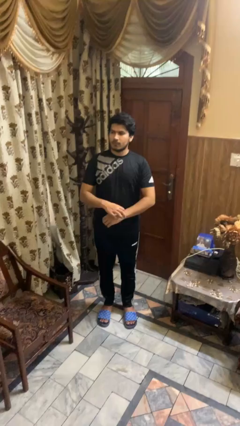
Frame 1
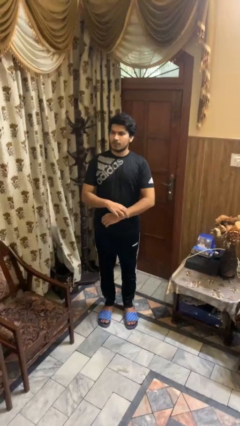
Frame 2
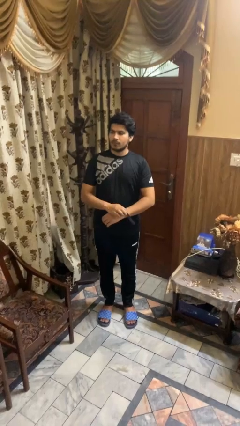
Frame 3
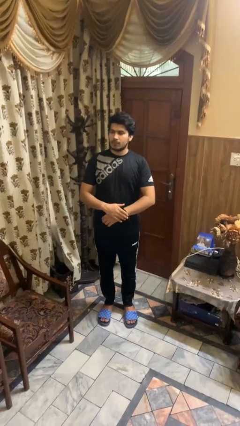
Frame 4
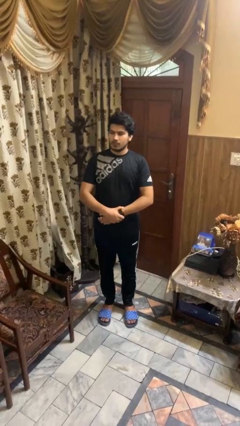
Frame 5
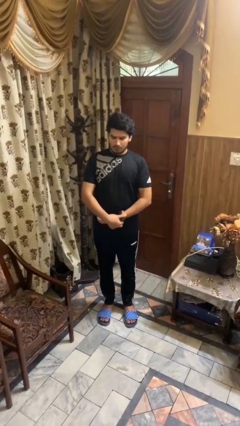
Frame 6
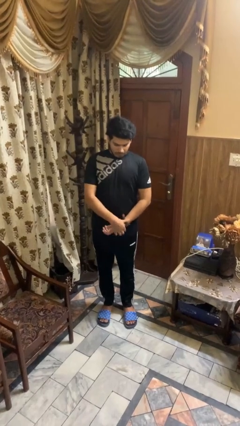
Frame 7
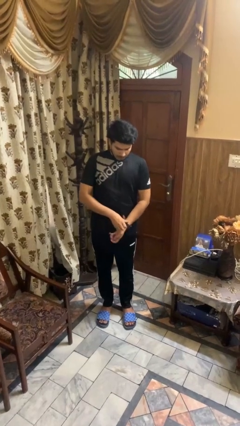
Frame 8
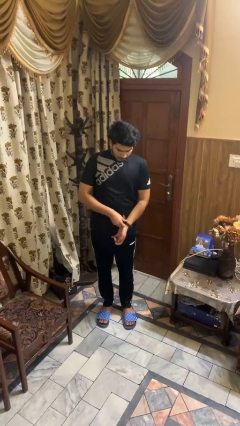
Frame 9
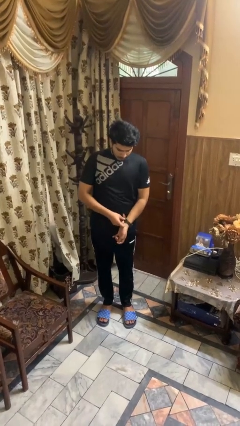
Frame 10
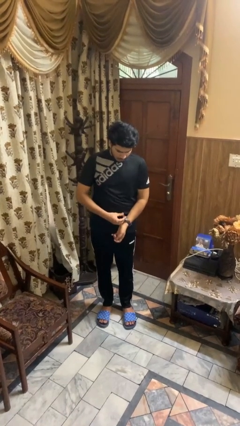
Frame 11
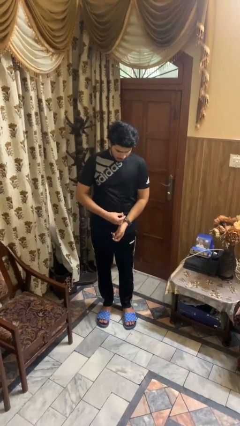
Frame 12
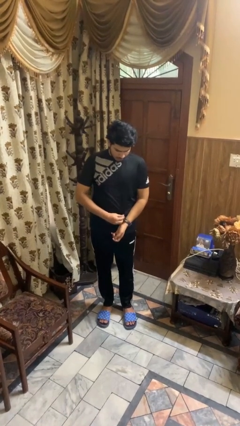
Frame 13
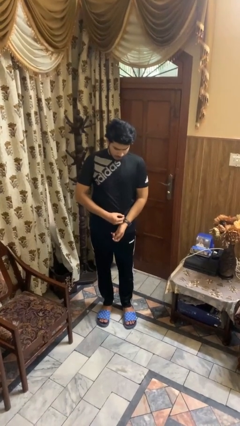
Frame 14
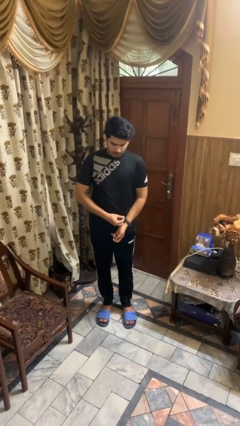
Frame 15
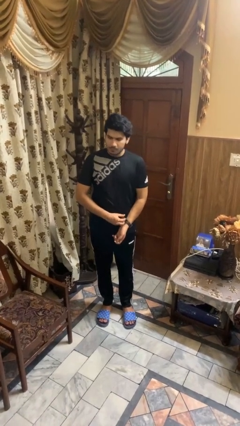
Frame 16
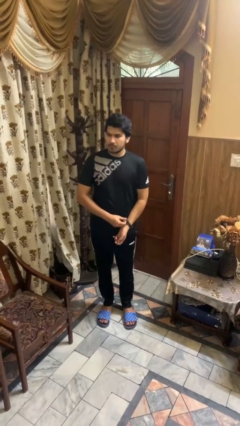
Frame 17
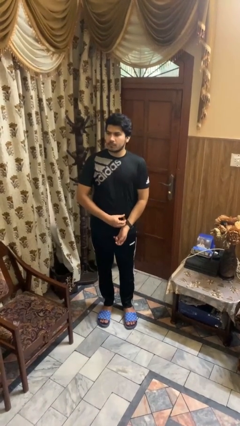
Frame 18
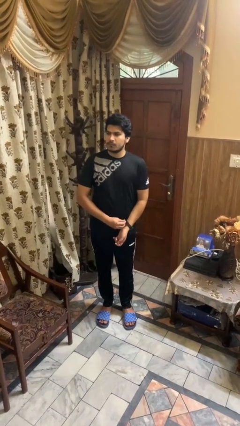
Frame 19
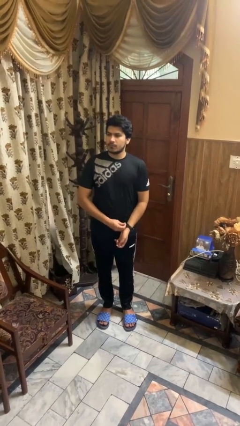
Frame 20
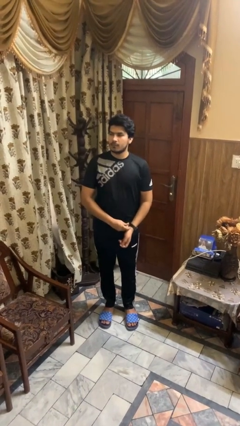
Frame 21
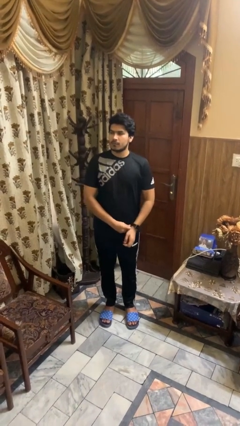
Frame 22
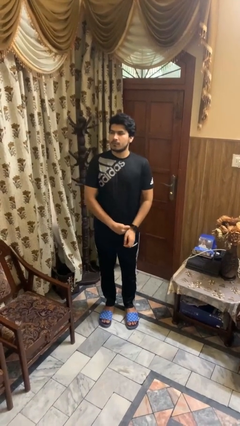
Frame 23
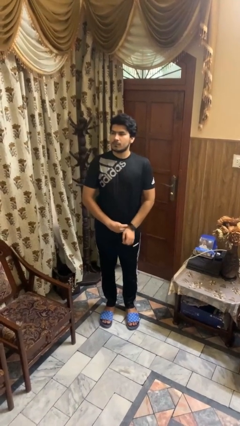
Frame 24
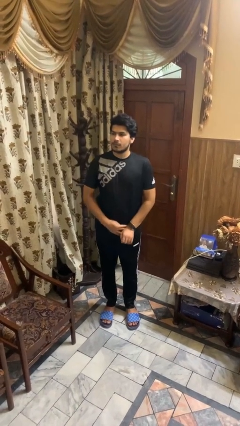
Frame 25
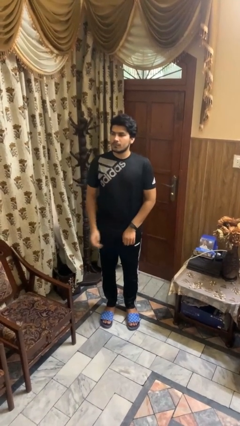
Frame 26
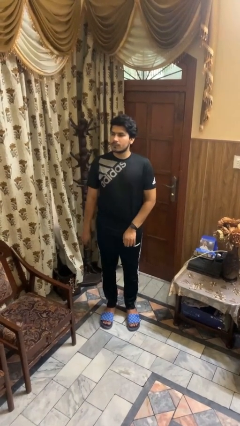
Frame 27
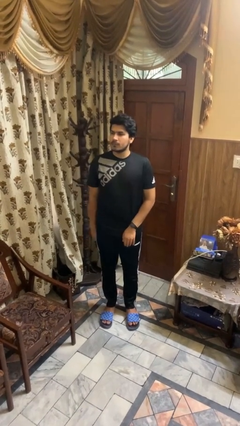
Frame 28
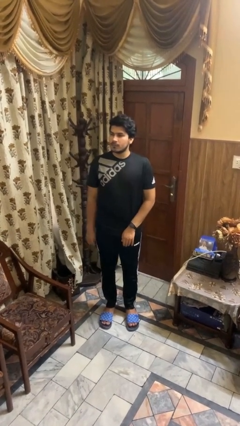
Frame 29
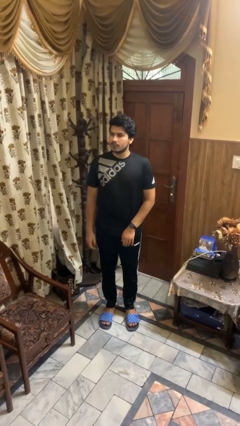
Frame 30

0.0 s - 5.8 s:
person puts on wristwatch

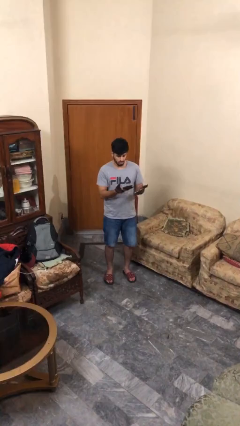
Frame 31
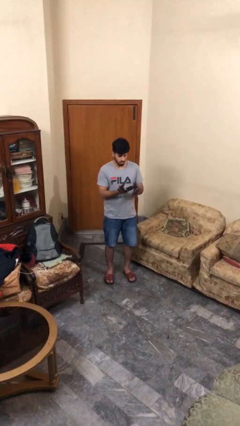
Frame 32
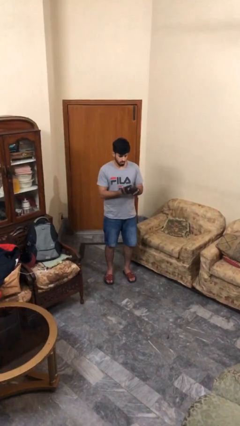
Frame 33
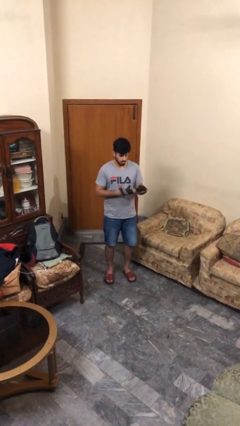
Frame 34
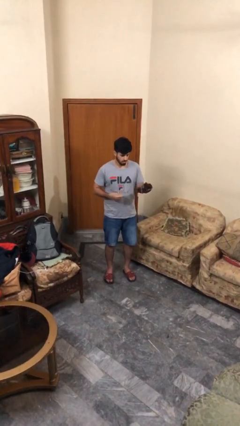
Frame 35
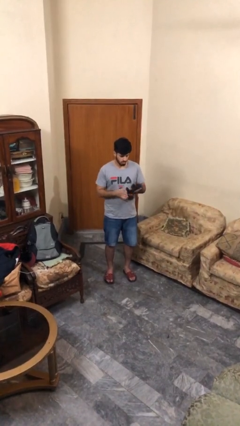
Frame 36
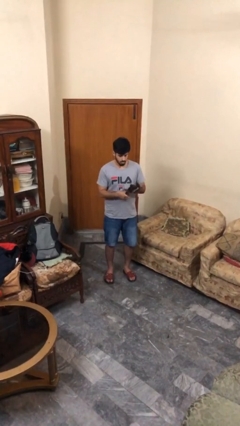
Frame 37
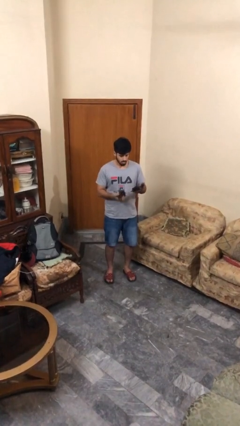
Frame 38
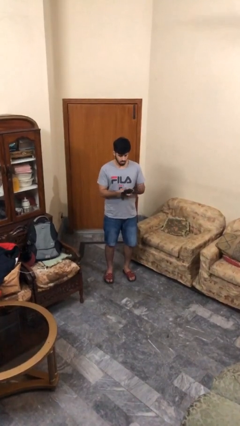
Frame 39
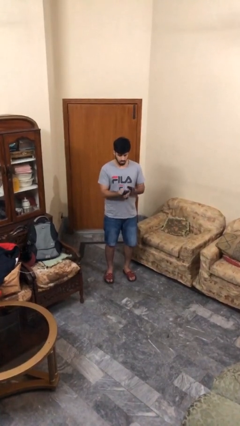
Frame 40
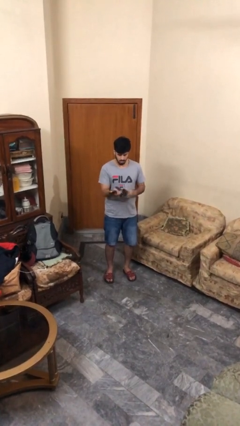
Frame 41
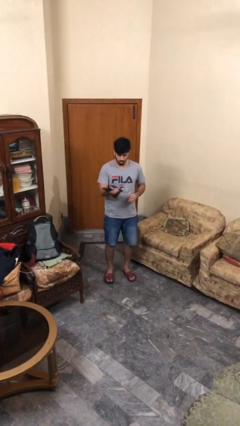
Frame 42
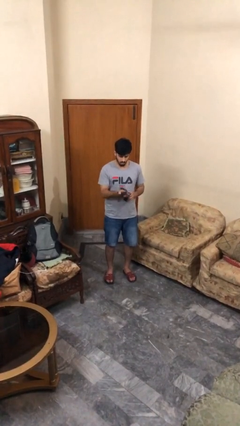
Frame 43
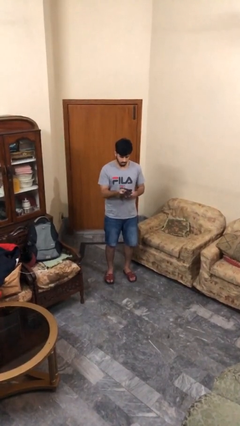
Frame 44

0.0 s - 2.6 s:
person takes off gloves

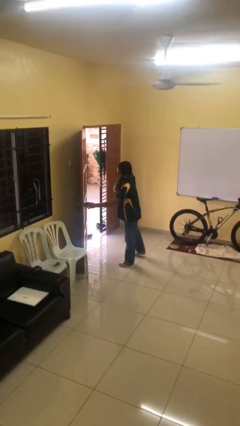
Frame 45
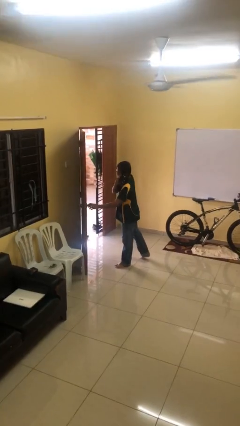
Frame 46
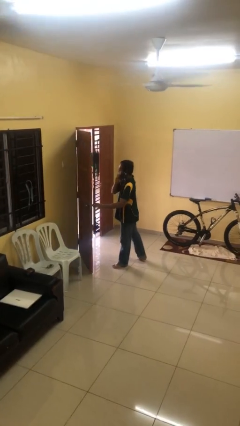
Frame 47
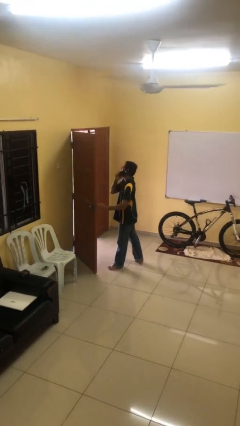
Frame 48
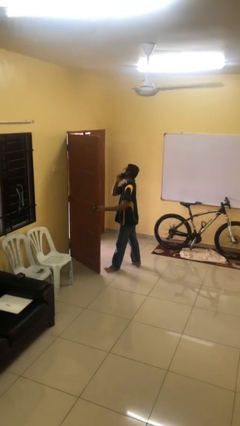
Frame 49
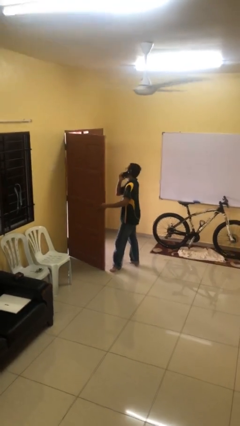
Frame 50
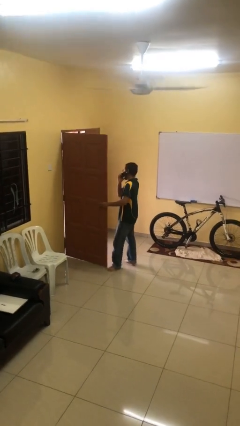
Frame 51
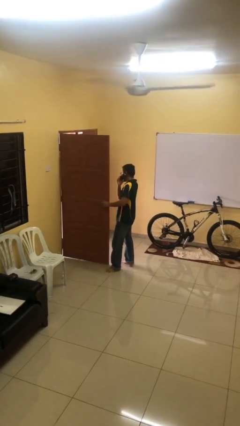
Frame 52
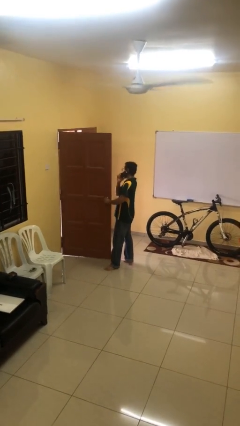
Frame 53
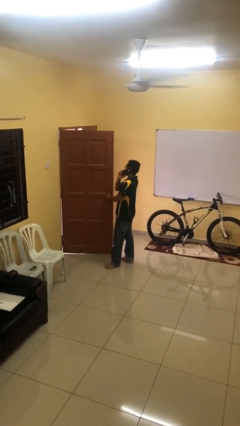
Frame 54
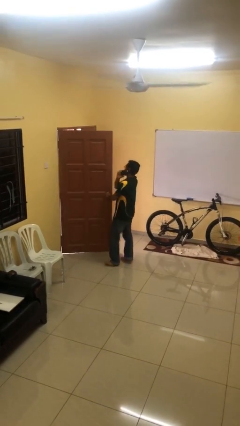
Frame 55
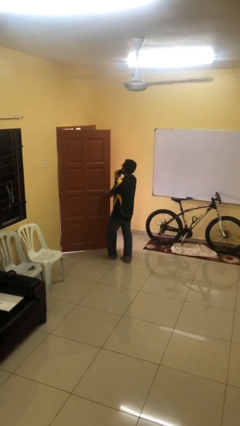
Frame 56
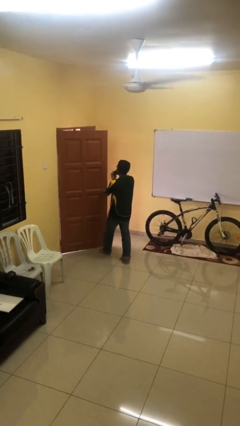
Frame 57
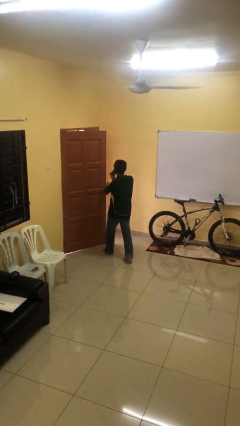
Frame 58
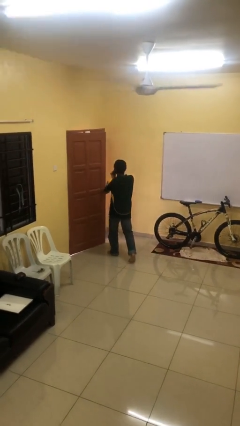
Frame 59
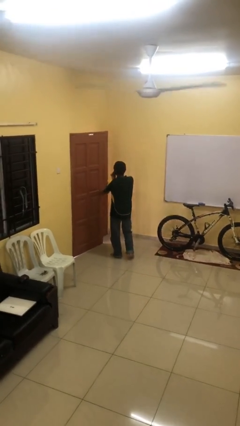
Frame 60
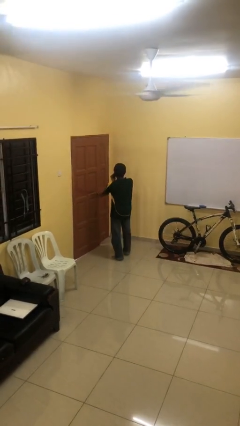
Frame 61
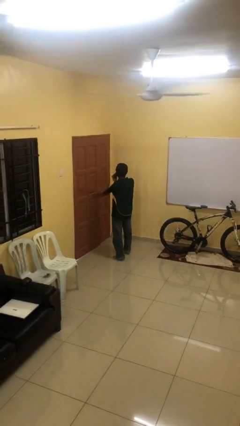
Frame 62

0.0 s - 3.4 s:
person closes facility door

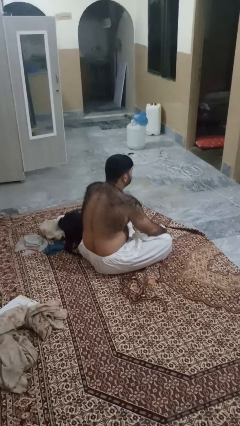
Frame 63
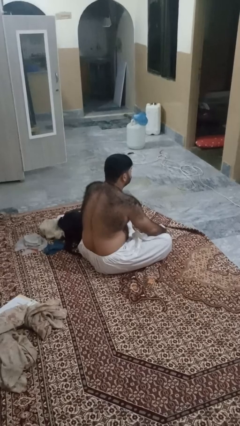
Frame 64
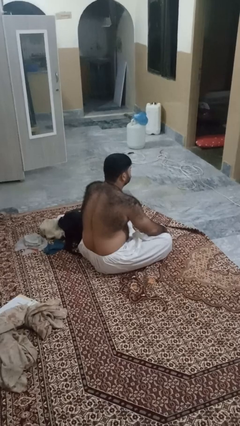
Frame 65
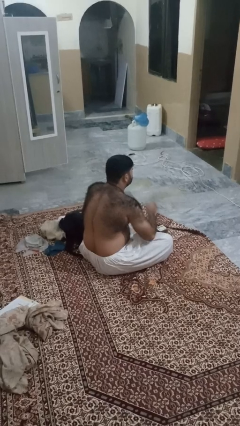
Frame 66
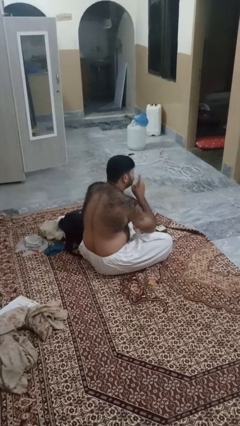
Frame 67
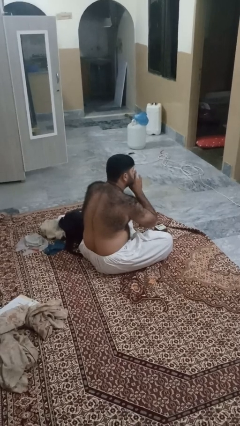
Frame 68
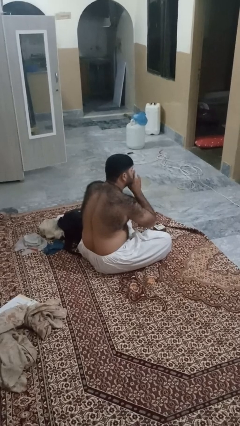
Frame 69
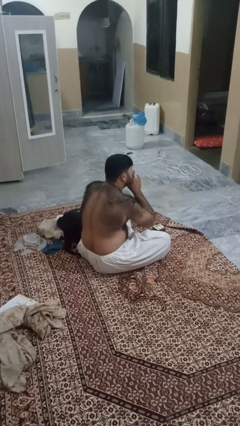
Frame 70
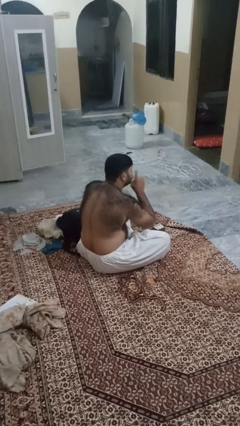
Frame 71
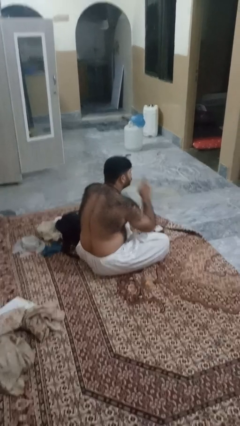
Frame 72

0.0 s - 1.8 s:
person gestures be quiet

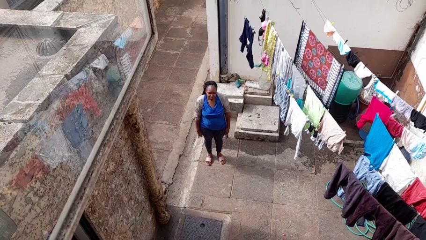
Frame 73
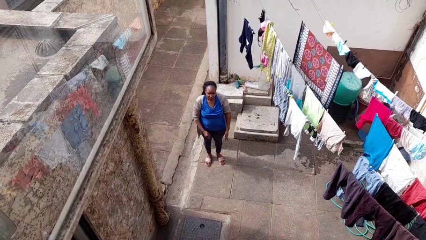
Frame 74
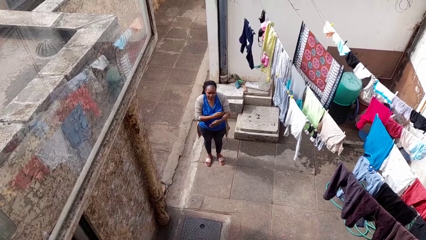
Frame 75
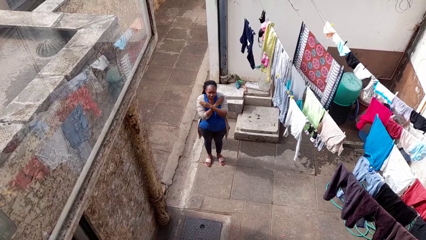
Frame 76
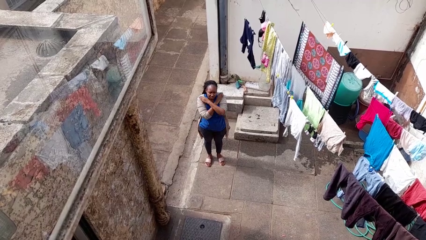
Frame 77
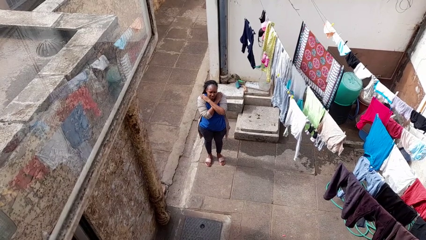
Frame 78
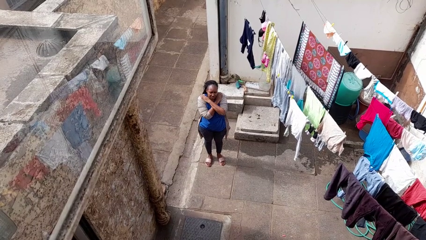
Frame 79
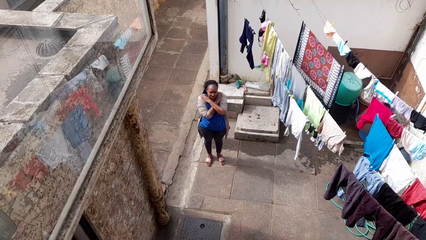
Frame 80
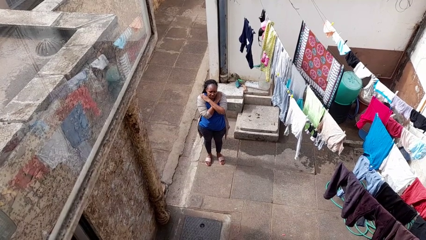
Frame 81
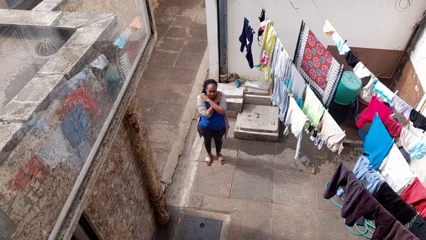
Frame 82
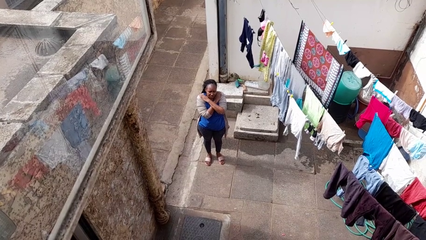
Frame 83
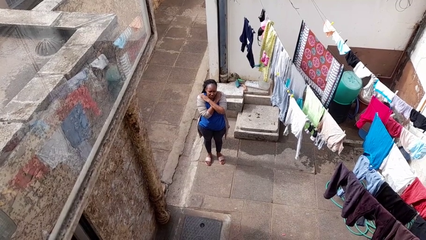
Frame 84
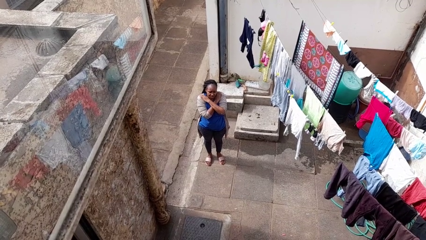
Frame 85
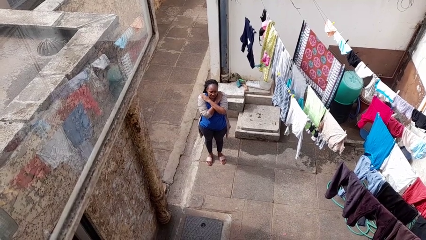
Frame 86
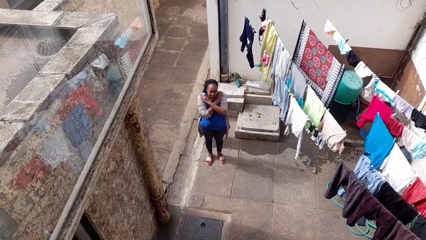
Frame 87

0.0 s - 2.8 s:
person gestures arms x

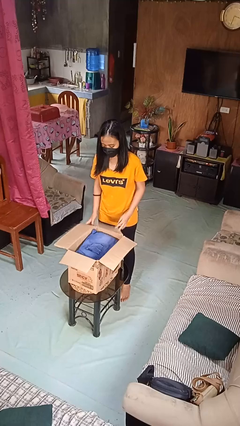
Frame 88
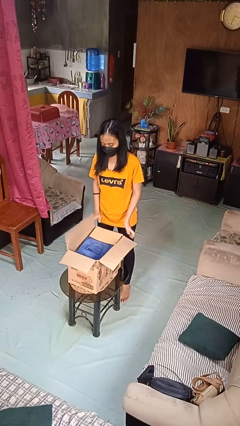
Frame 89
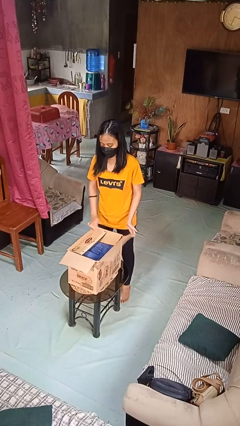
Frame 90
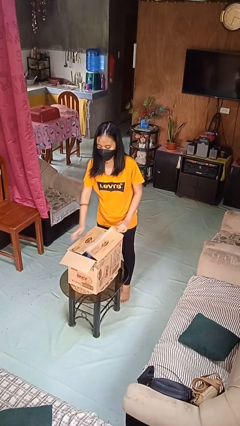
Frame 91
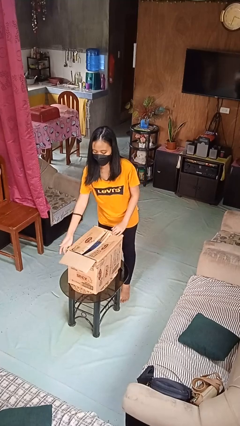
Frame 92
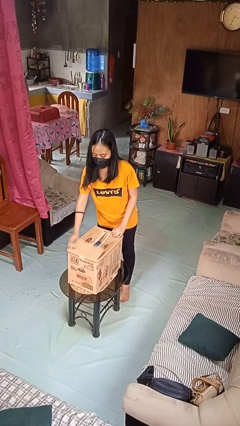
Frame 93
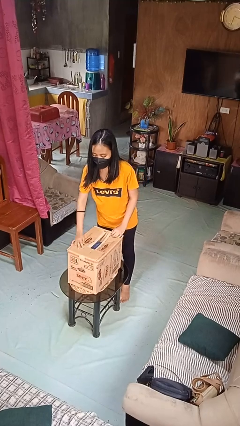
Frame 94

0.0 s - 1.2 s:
person closes box

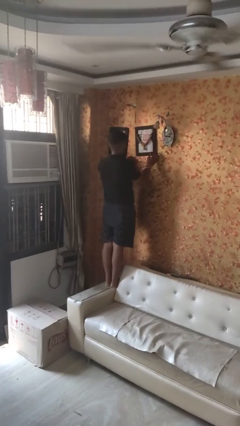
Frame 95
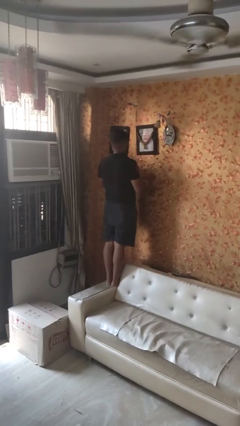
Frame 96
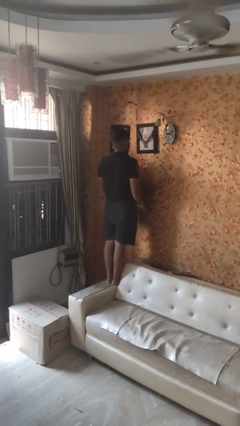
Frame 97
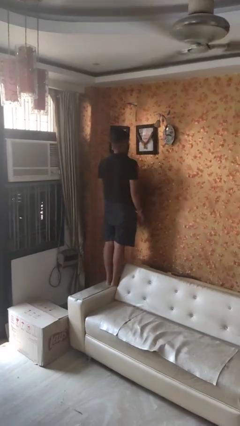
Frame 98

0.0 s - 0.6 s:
person puts up picture frame
